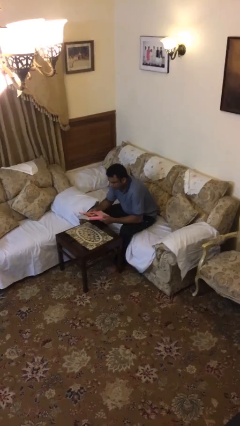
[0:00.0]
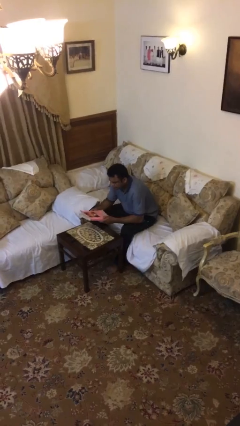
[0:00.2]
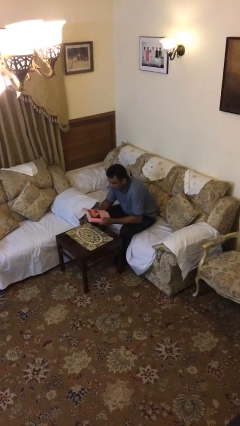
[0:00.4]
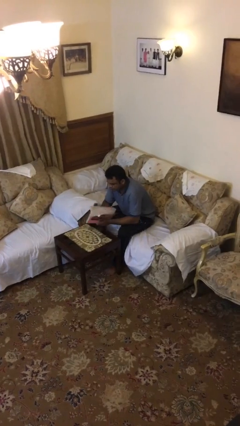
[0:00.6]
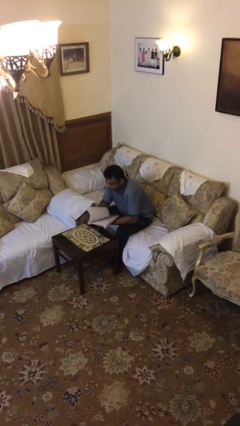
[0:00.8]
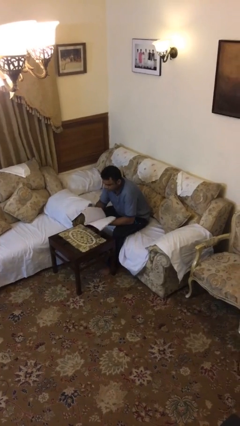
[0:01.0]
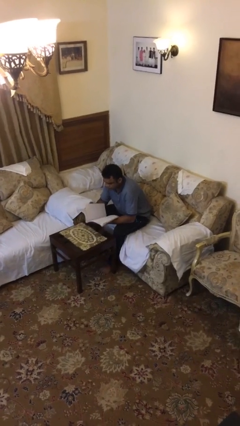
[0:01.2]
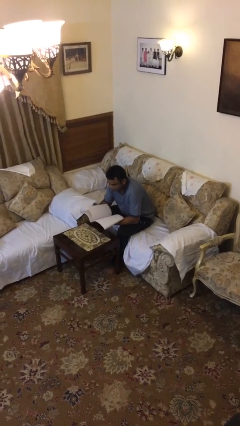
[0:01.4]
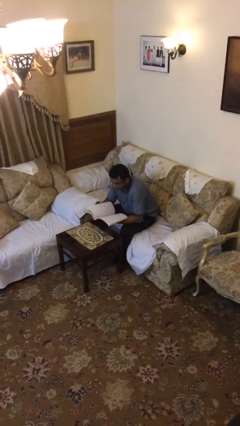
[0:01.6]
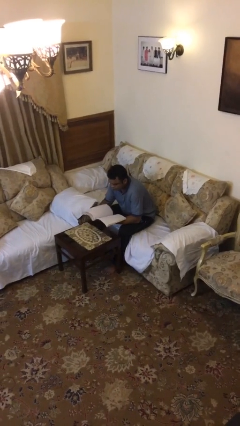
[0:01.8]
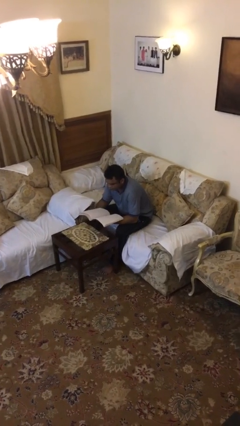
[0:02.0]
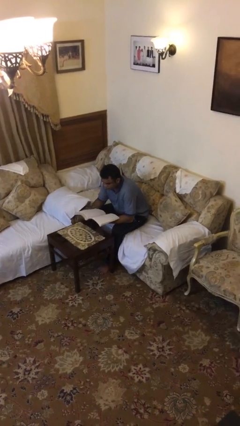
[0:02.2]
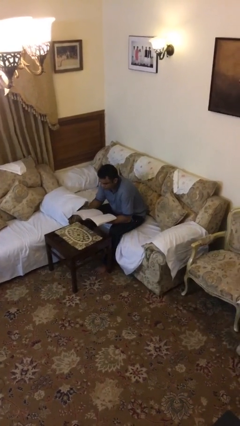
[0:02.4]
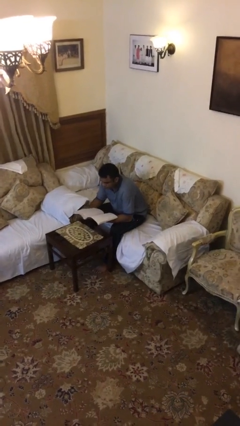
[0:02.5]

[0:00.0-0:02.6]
person reads document

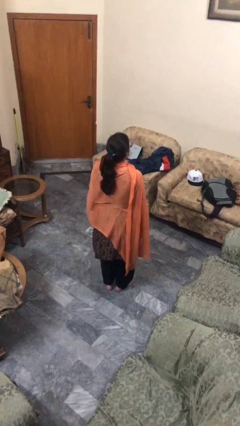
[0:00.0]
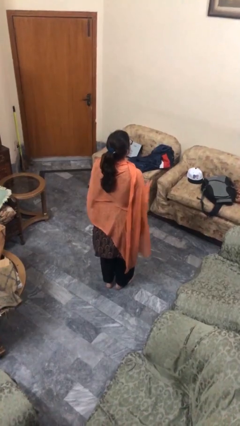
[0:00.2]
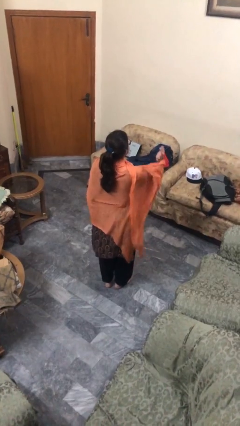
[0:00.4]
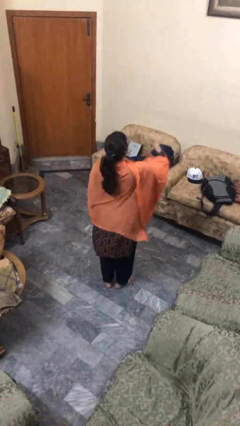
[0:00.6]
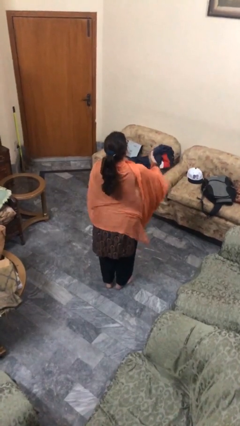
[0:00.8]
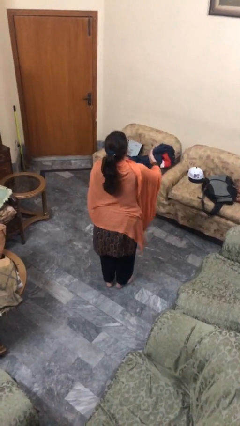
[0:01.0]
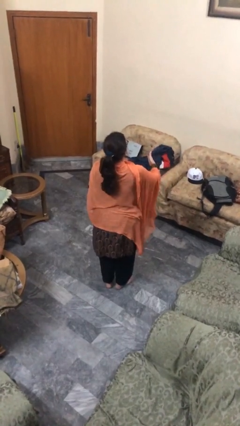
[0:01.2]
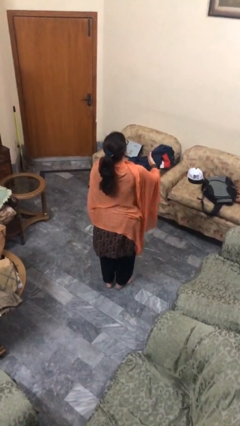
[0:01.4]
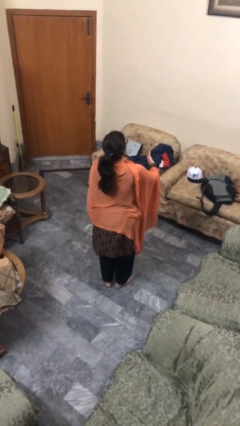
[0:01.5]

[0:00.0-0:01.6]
person karate chop

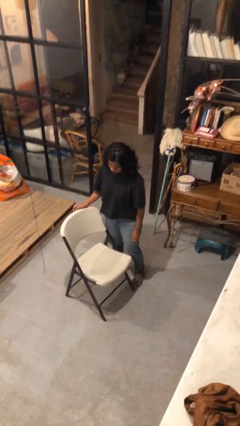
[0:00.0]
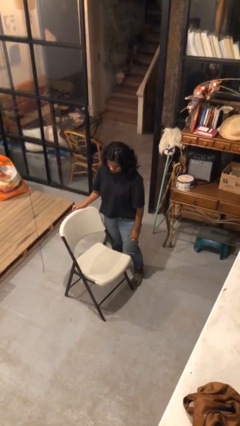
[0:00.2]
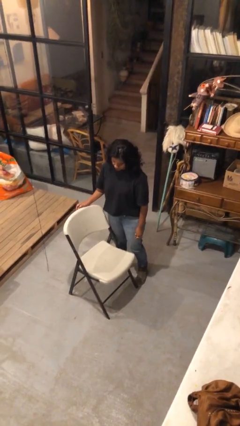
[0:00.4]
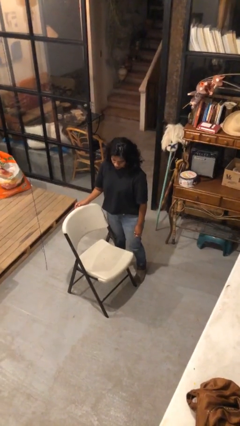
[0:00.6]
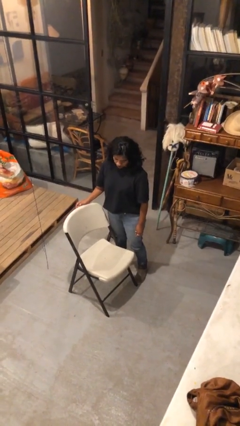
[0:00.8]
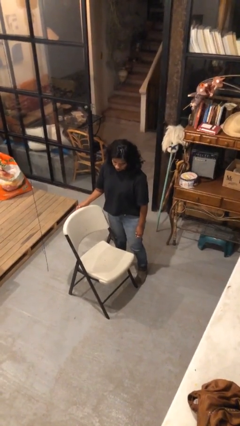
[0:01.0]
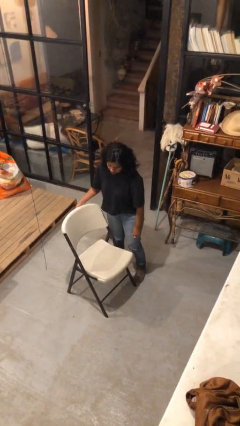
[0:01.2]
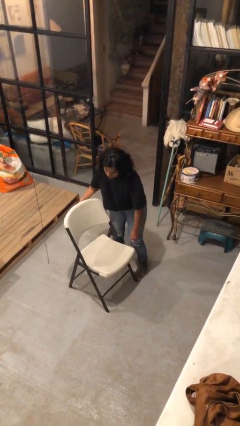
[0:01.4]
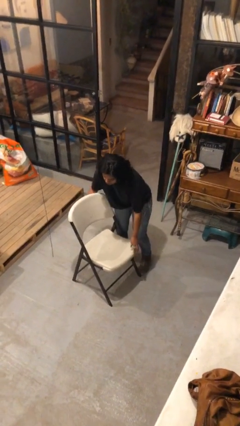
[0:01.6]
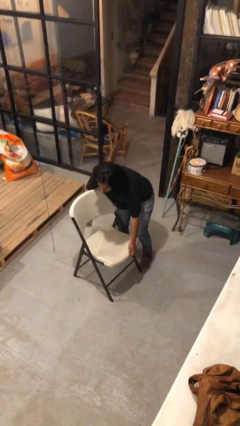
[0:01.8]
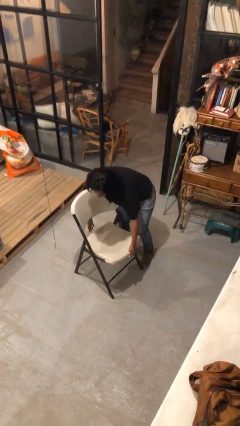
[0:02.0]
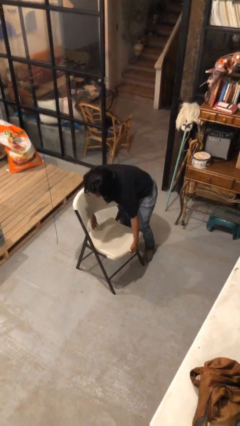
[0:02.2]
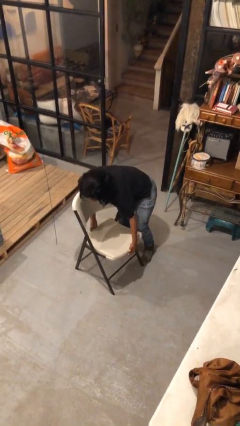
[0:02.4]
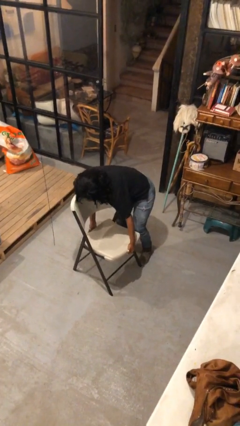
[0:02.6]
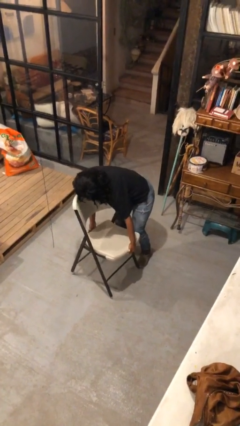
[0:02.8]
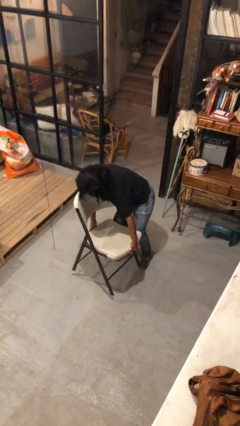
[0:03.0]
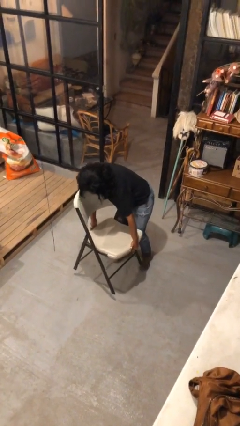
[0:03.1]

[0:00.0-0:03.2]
person picks up object from floor

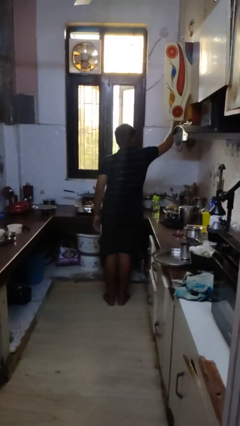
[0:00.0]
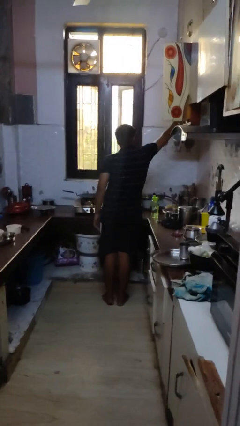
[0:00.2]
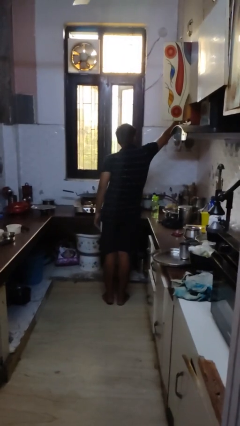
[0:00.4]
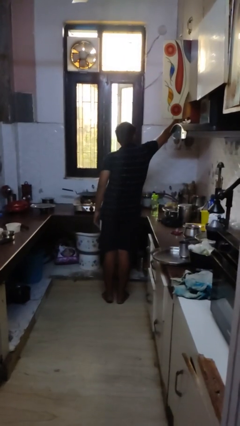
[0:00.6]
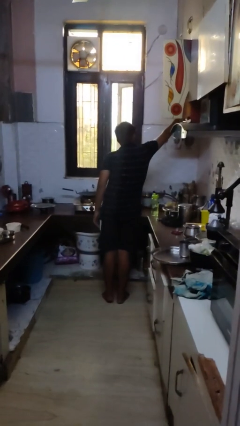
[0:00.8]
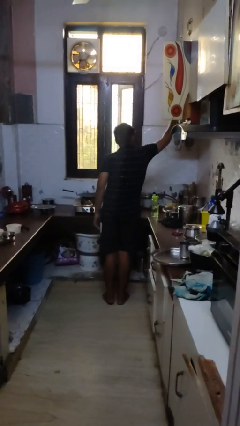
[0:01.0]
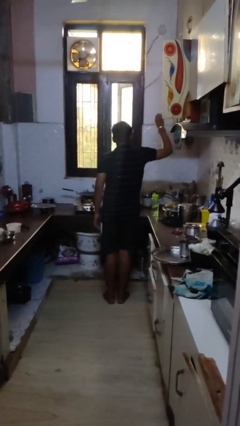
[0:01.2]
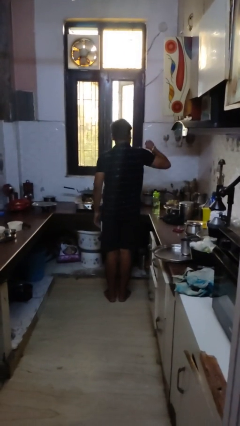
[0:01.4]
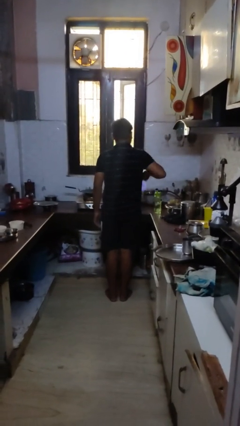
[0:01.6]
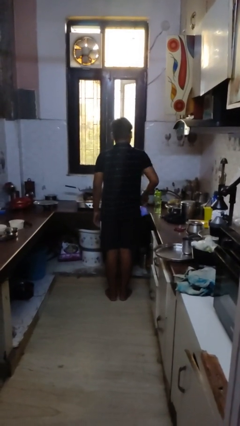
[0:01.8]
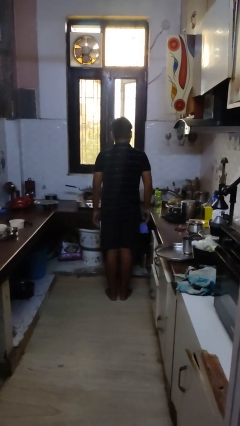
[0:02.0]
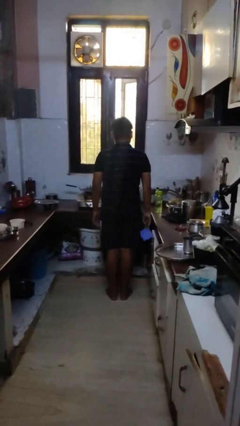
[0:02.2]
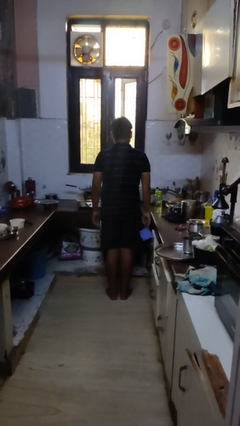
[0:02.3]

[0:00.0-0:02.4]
person takes object from cabinet

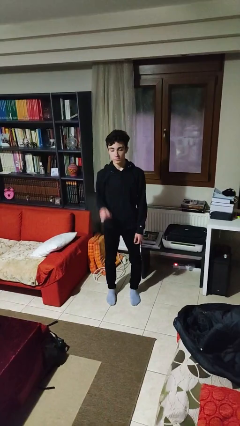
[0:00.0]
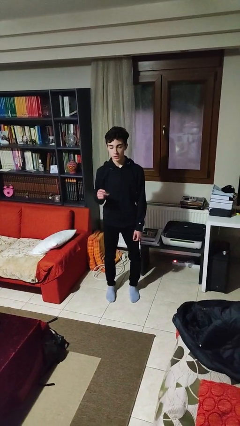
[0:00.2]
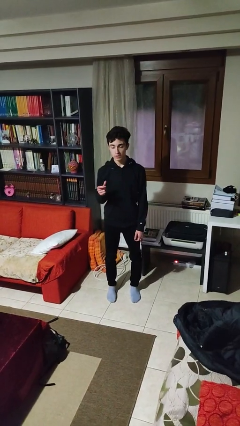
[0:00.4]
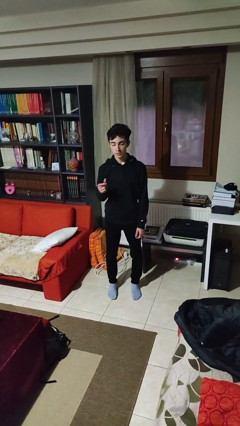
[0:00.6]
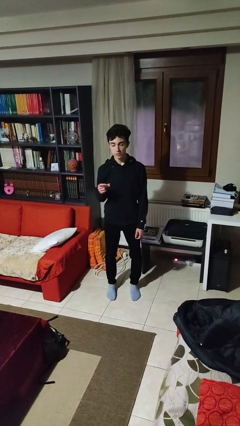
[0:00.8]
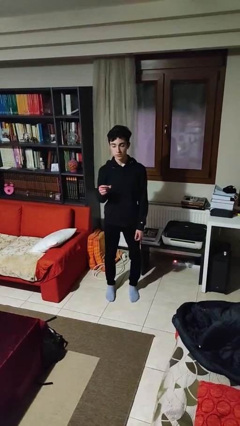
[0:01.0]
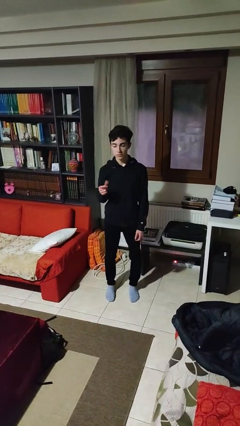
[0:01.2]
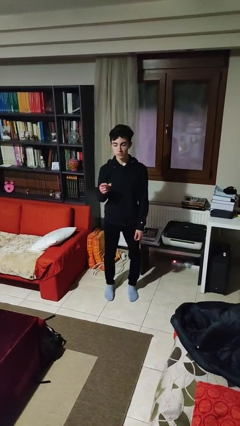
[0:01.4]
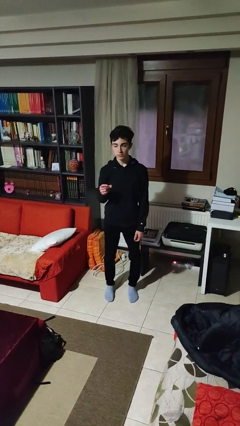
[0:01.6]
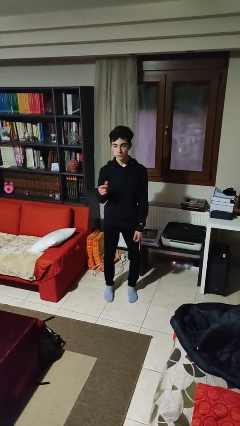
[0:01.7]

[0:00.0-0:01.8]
person snaps fingers

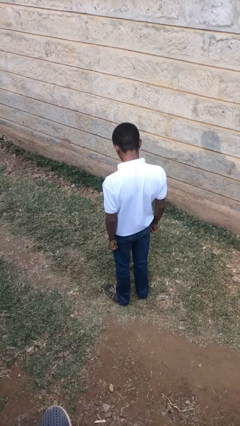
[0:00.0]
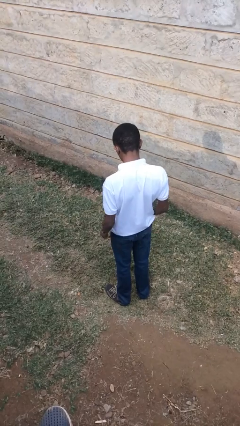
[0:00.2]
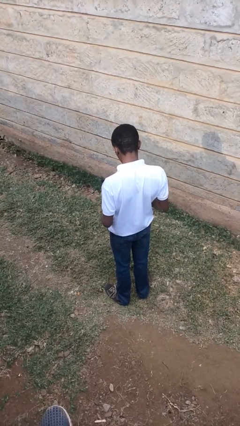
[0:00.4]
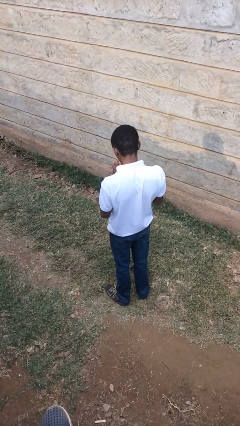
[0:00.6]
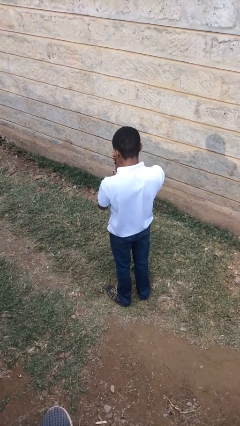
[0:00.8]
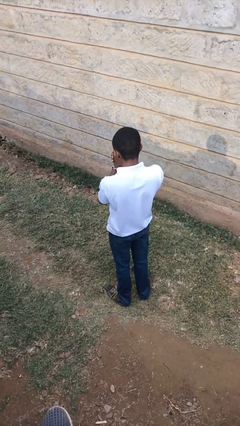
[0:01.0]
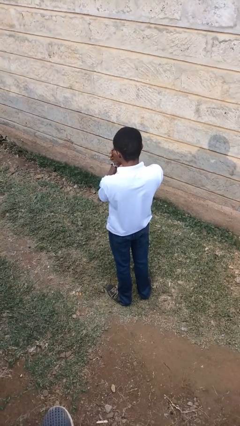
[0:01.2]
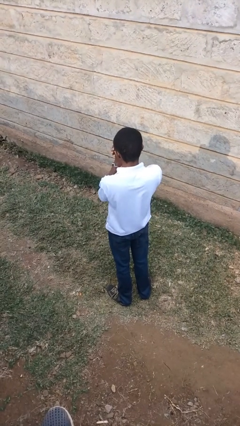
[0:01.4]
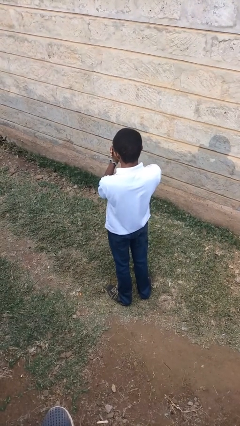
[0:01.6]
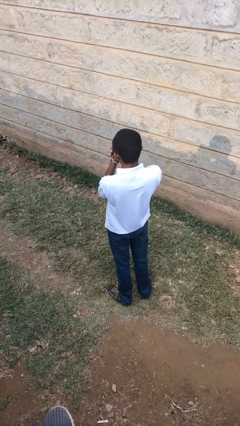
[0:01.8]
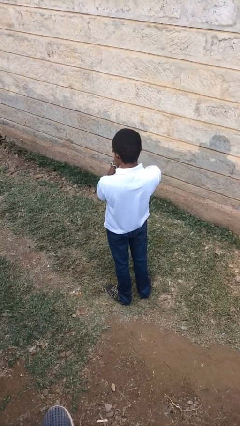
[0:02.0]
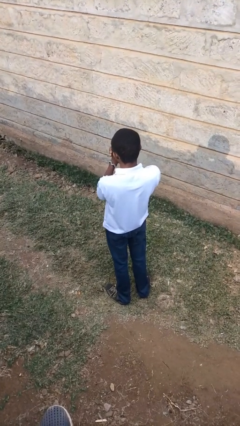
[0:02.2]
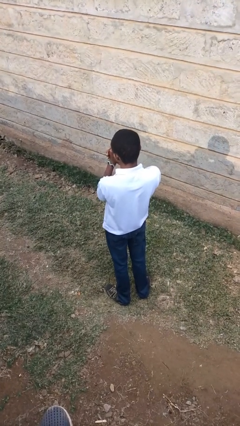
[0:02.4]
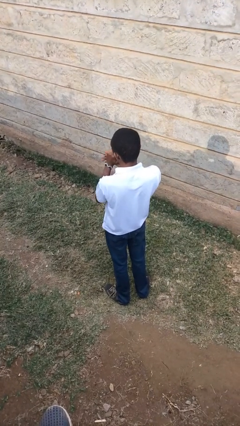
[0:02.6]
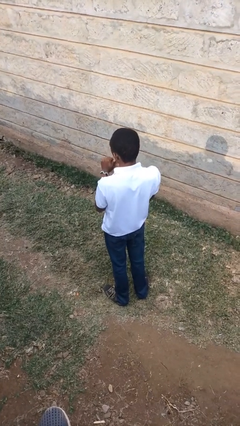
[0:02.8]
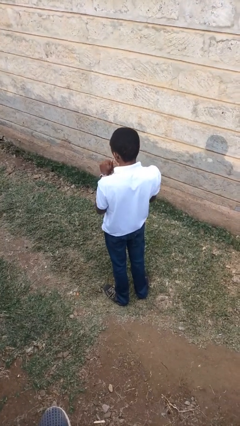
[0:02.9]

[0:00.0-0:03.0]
person blows into hands

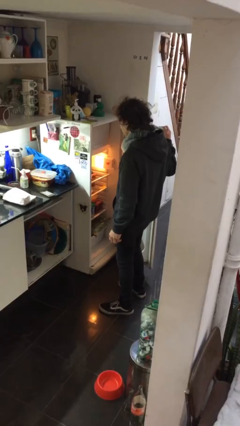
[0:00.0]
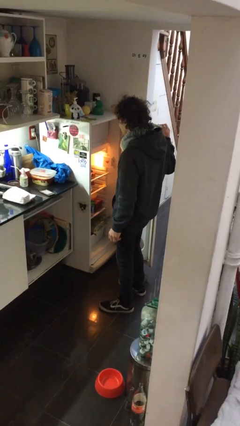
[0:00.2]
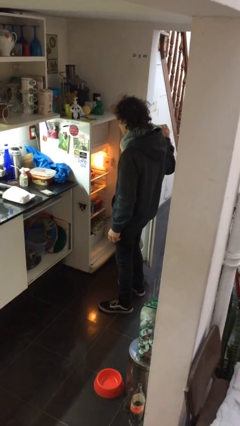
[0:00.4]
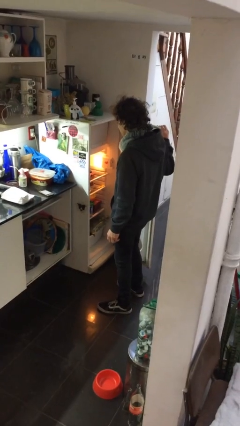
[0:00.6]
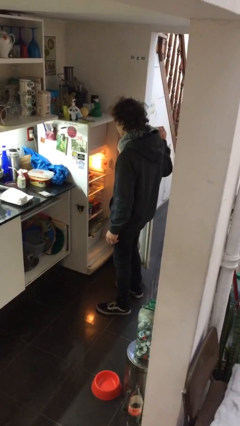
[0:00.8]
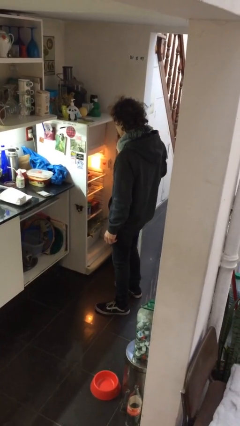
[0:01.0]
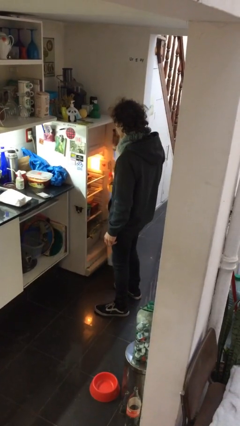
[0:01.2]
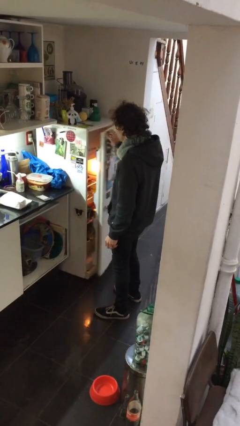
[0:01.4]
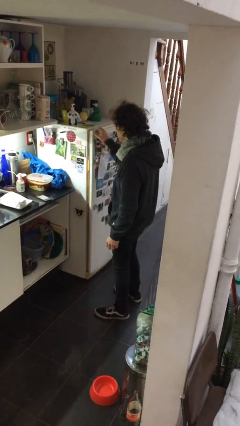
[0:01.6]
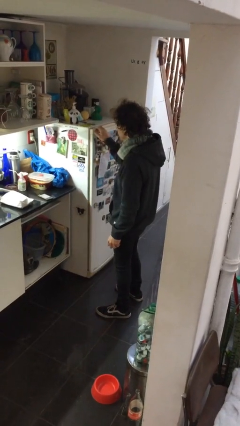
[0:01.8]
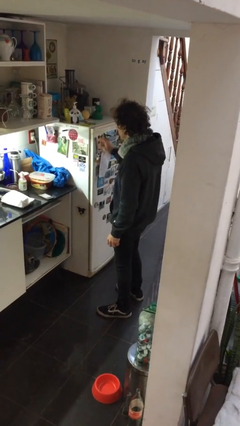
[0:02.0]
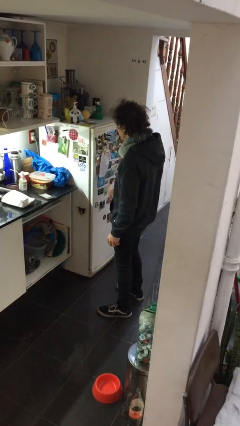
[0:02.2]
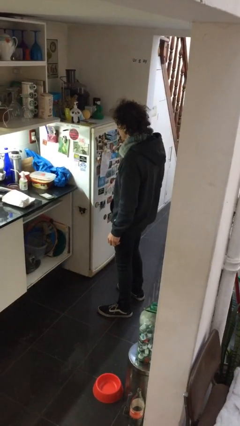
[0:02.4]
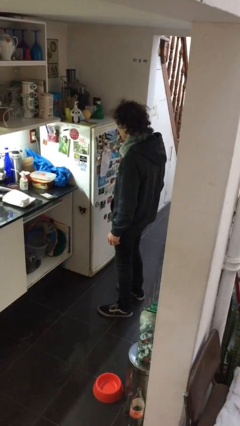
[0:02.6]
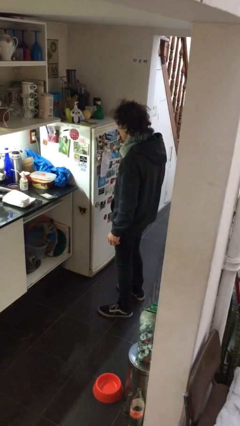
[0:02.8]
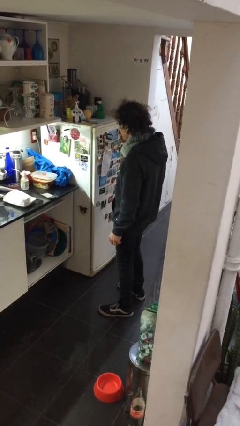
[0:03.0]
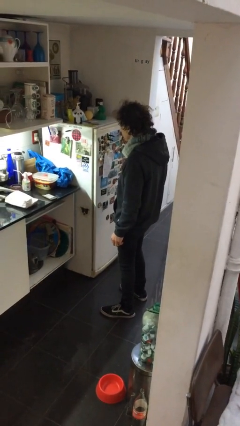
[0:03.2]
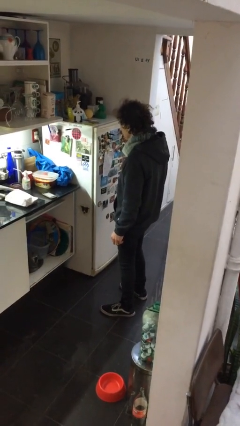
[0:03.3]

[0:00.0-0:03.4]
person closes refrigerator
